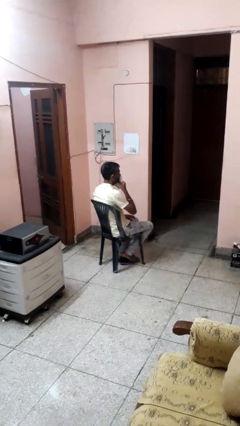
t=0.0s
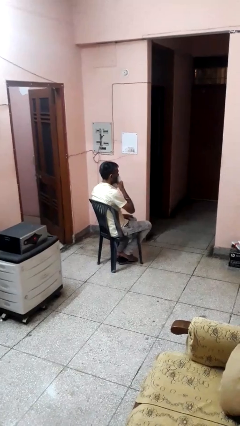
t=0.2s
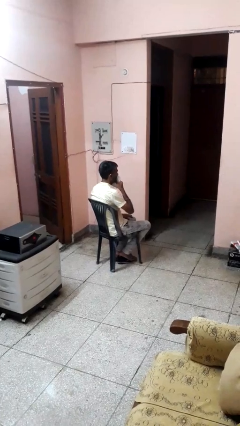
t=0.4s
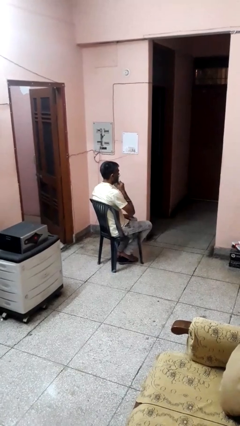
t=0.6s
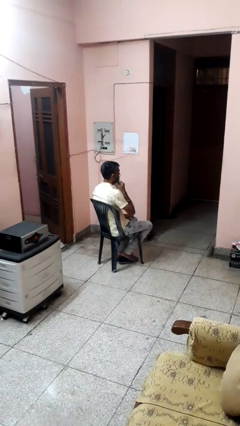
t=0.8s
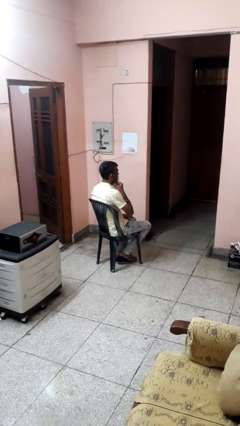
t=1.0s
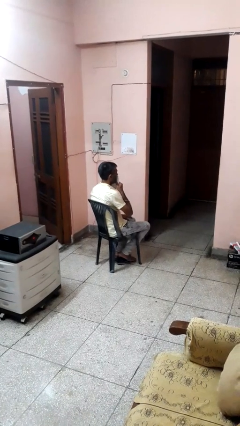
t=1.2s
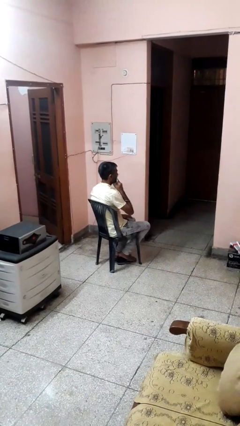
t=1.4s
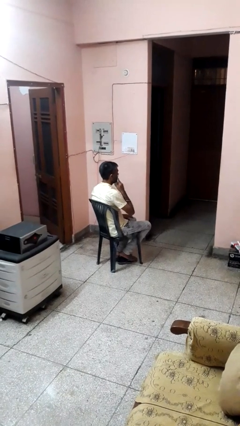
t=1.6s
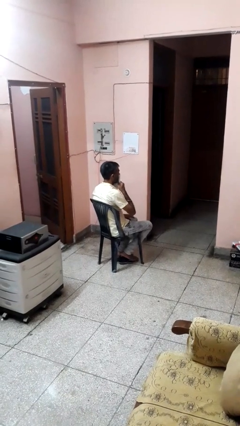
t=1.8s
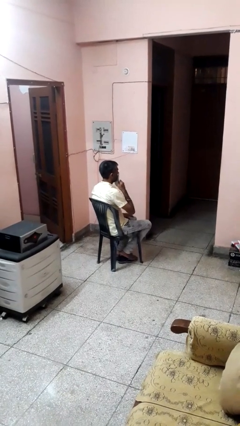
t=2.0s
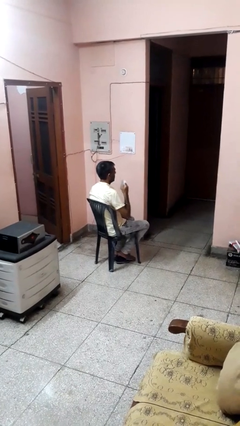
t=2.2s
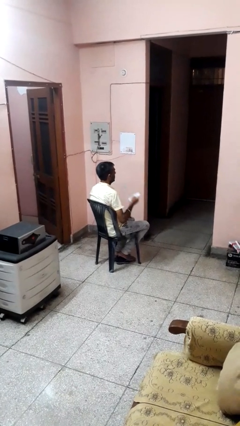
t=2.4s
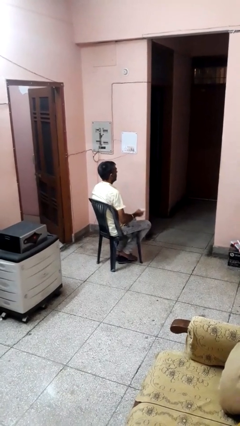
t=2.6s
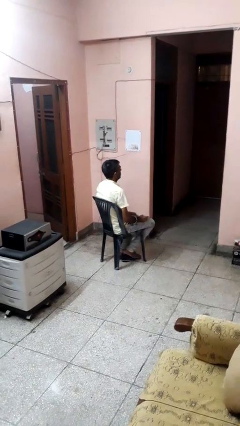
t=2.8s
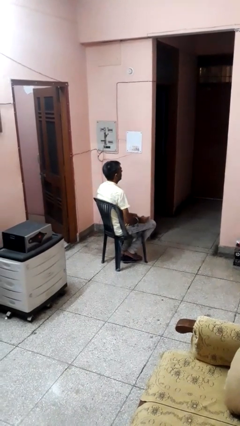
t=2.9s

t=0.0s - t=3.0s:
person wipes mouth with napkin

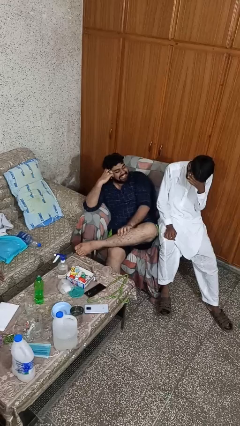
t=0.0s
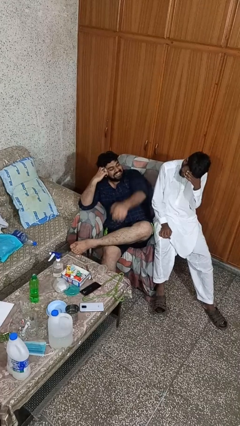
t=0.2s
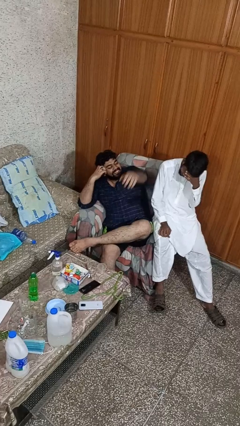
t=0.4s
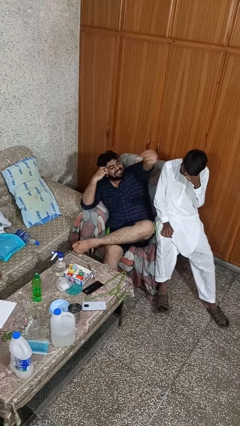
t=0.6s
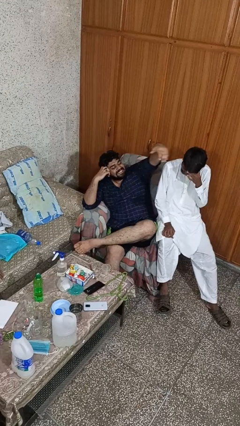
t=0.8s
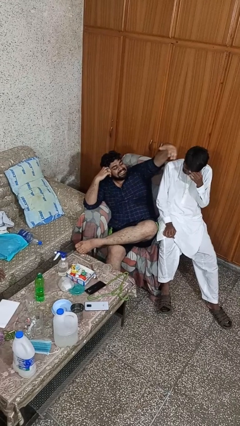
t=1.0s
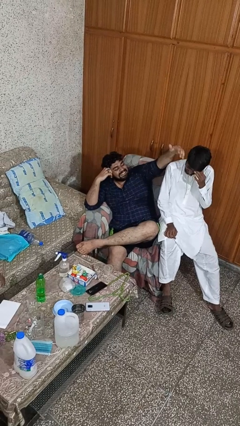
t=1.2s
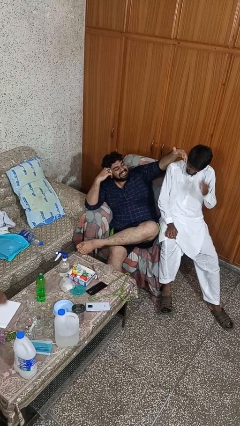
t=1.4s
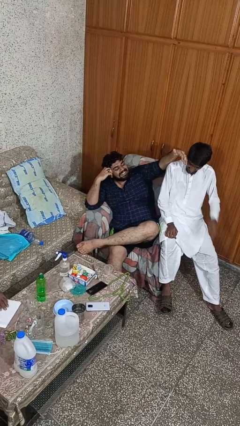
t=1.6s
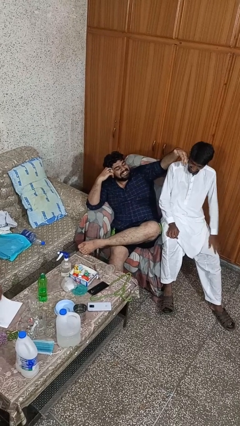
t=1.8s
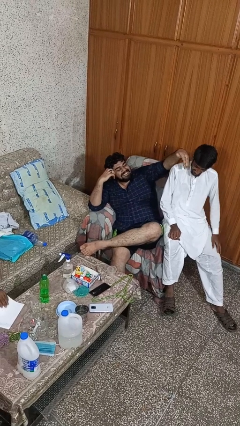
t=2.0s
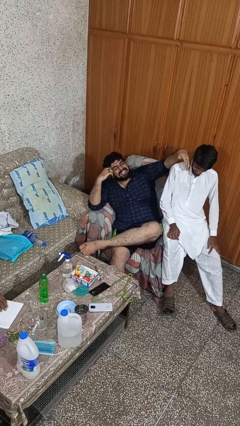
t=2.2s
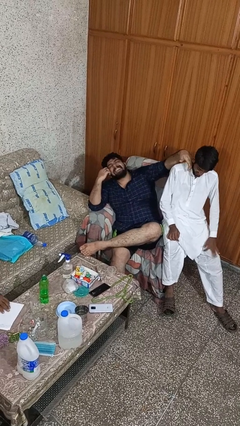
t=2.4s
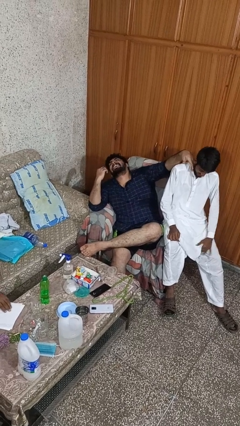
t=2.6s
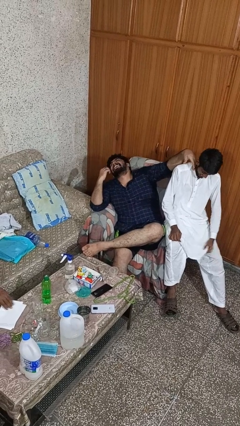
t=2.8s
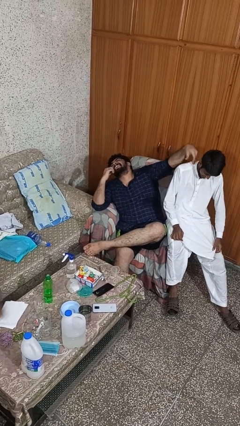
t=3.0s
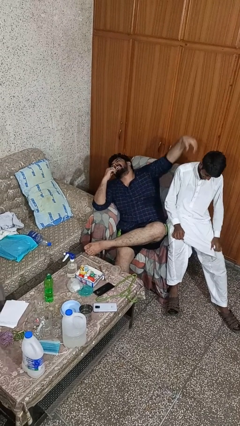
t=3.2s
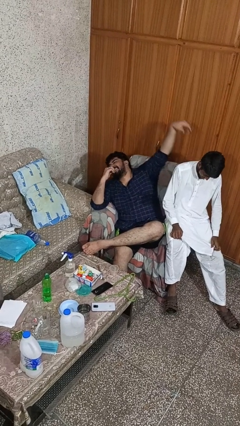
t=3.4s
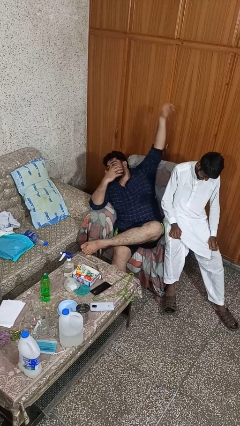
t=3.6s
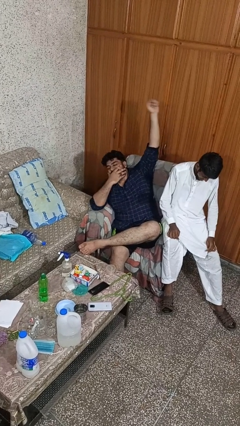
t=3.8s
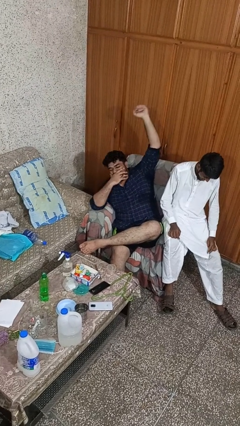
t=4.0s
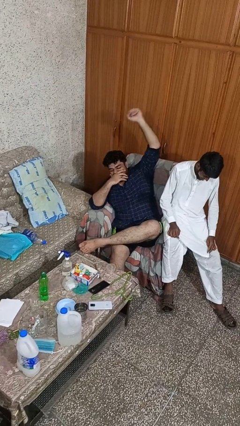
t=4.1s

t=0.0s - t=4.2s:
person touches face of person

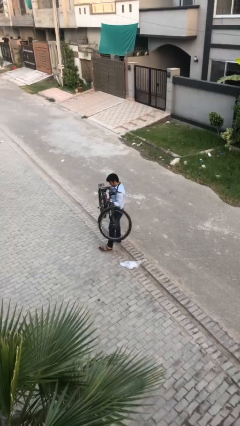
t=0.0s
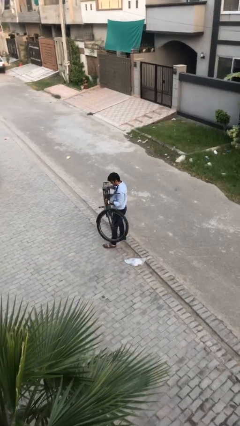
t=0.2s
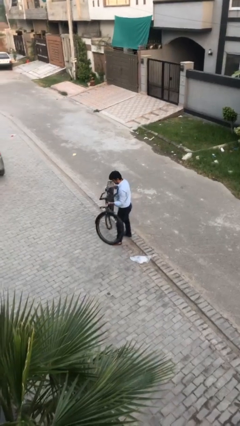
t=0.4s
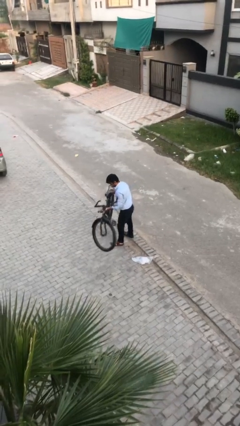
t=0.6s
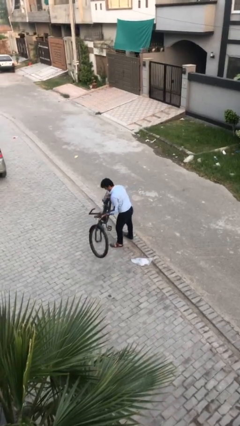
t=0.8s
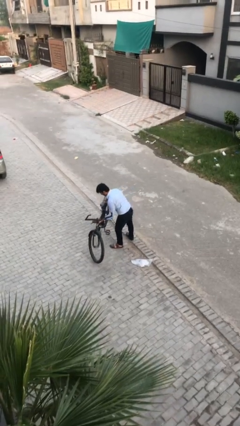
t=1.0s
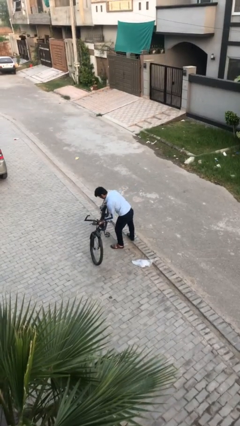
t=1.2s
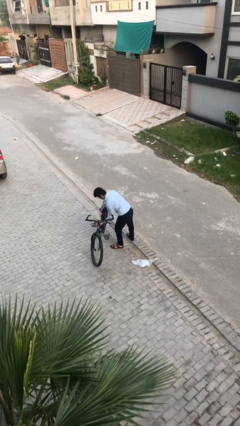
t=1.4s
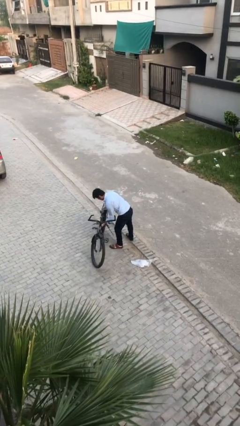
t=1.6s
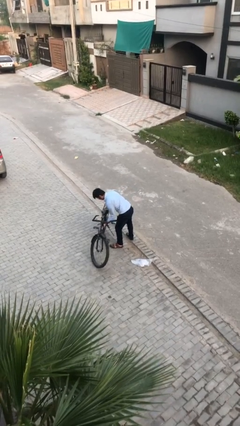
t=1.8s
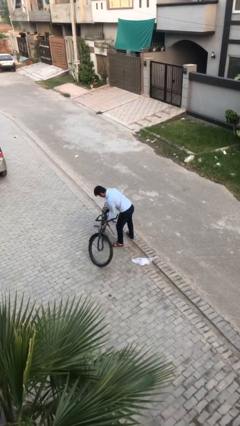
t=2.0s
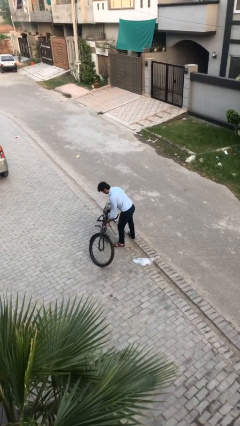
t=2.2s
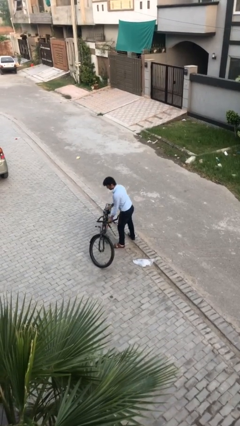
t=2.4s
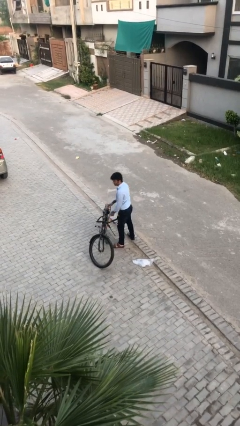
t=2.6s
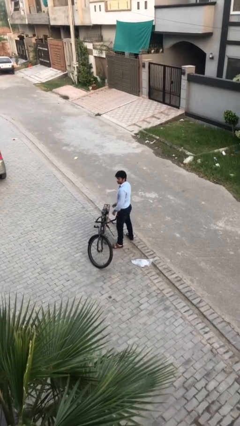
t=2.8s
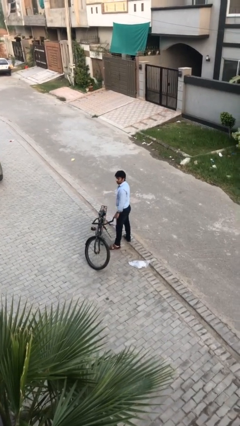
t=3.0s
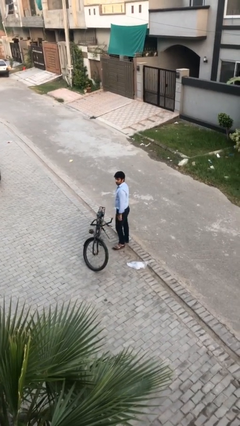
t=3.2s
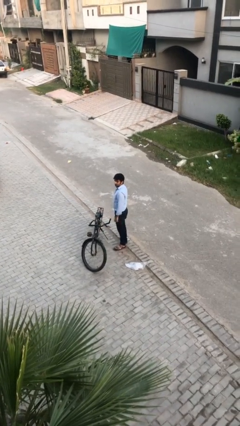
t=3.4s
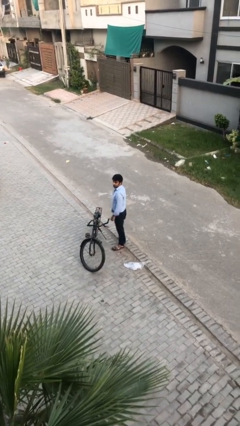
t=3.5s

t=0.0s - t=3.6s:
person puts down object on floor

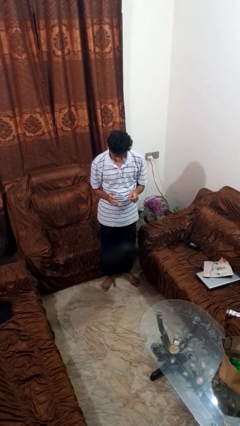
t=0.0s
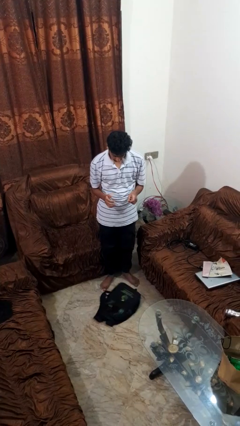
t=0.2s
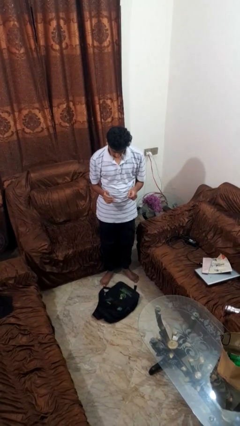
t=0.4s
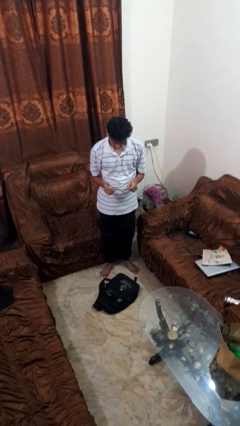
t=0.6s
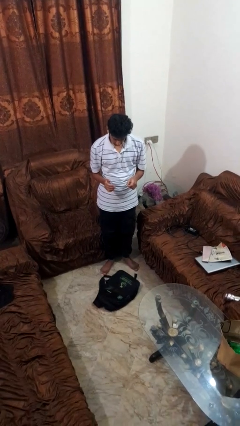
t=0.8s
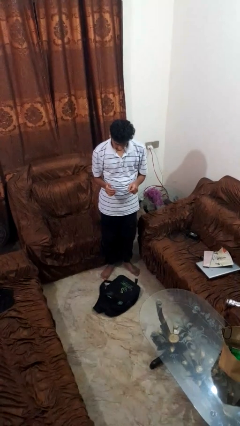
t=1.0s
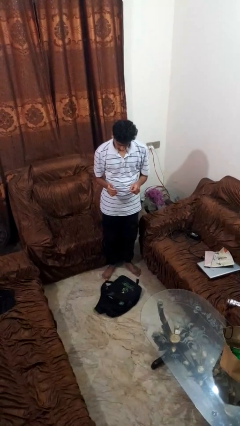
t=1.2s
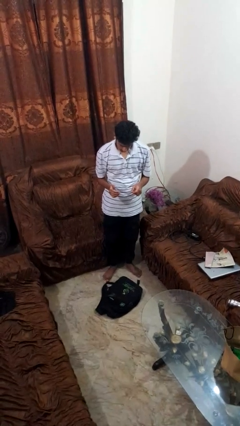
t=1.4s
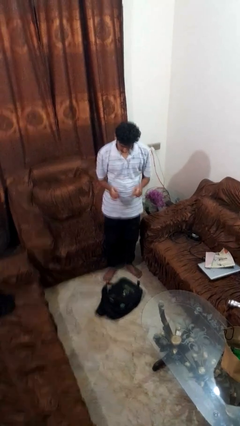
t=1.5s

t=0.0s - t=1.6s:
person drops object

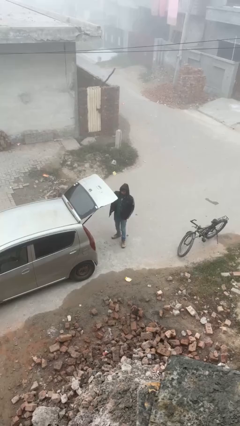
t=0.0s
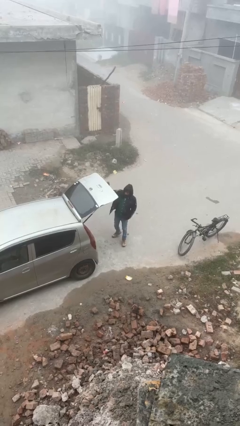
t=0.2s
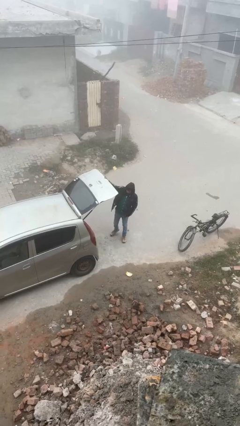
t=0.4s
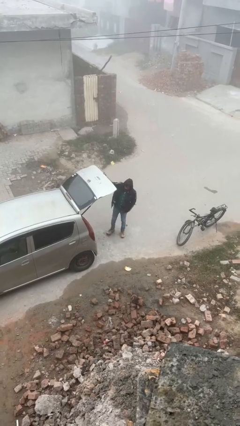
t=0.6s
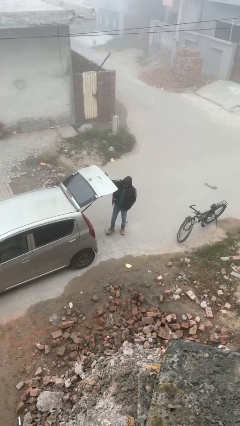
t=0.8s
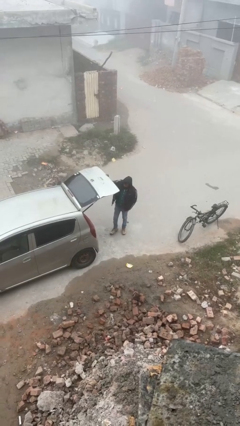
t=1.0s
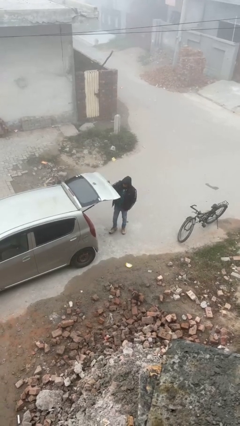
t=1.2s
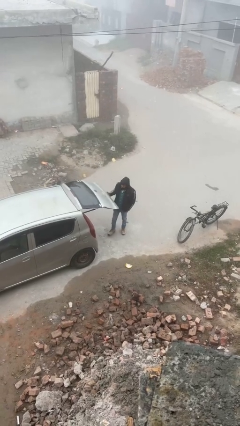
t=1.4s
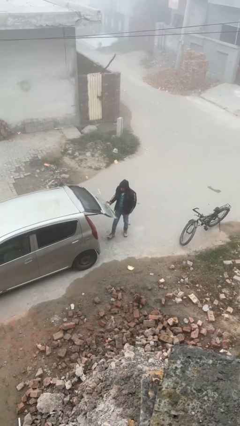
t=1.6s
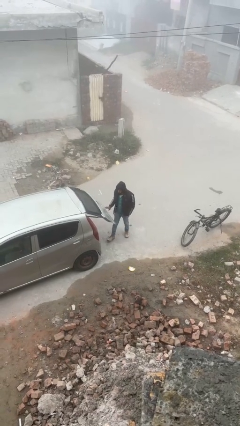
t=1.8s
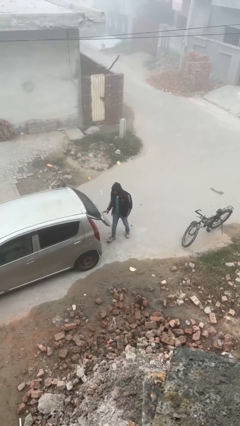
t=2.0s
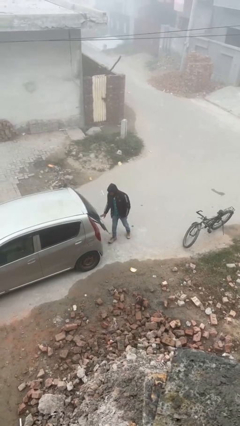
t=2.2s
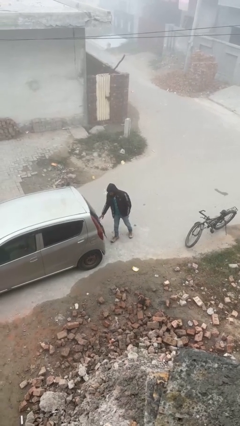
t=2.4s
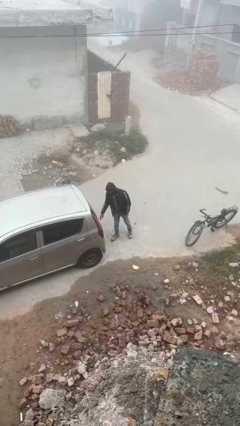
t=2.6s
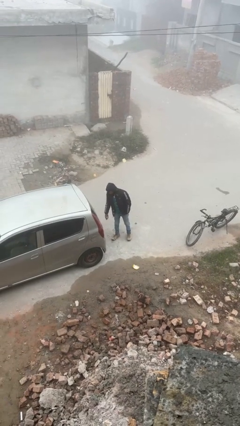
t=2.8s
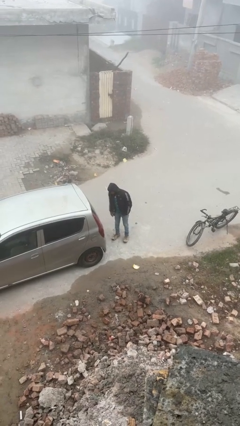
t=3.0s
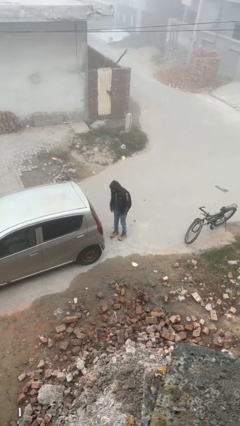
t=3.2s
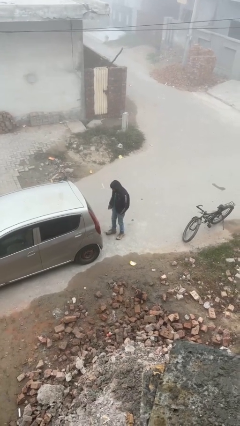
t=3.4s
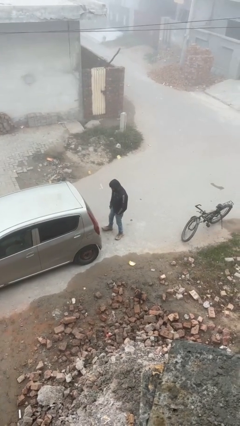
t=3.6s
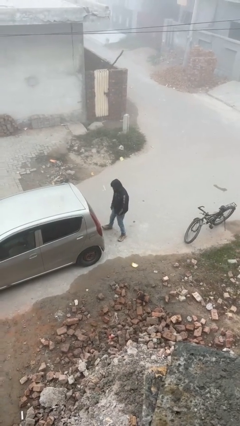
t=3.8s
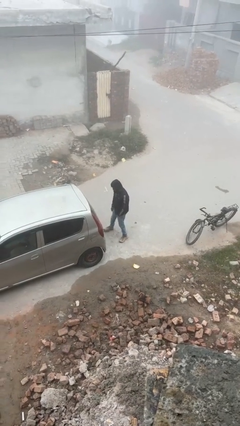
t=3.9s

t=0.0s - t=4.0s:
person closes car trunk

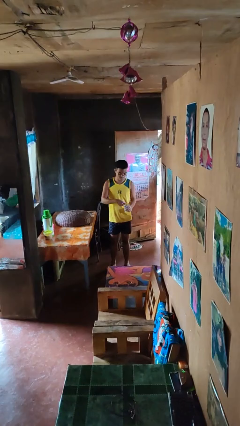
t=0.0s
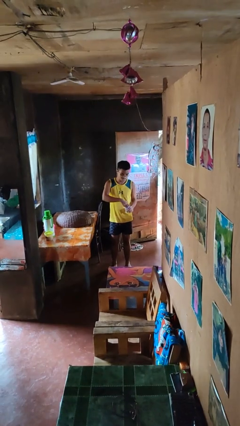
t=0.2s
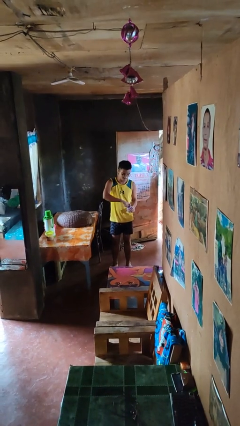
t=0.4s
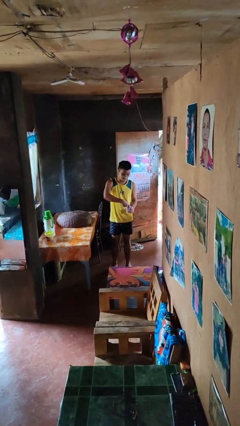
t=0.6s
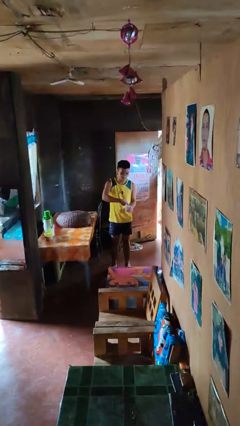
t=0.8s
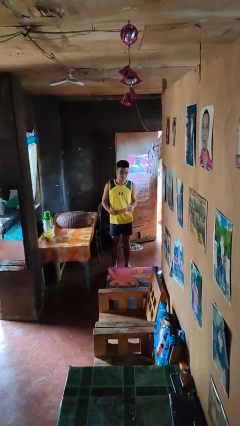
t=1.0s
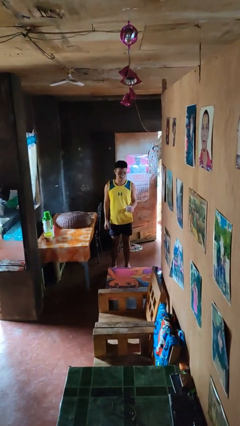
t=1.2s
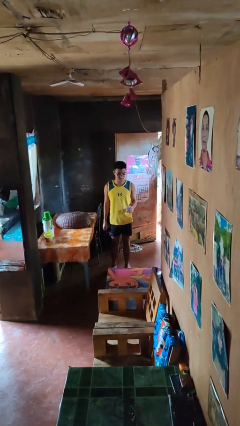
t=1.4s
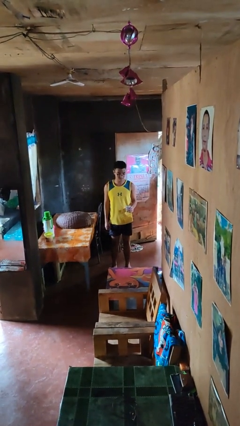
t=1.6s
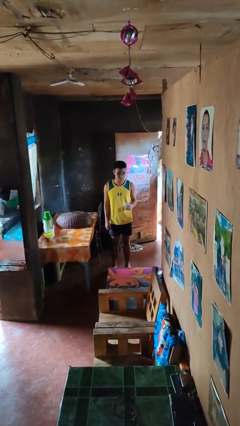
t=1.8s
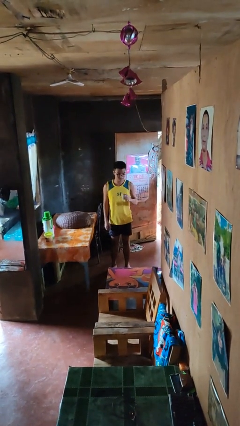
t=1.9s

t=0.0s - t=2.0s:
person opens beverage can
